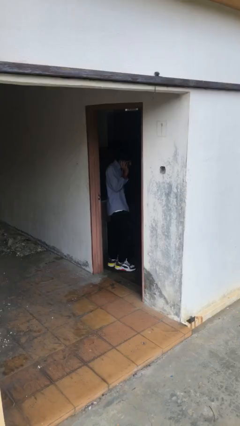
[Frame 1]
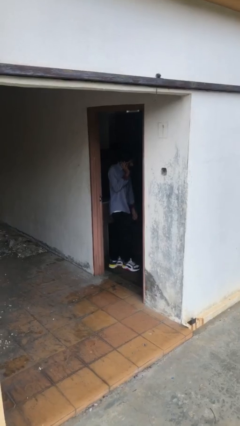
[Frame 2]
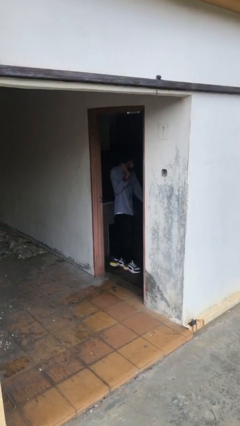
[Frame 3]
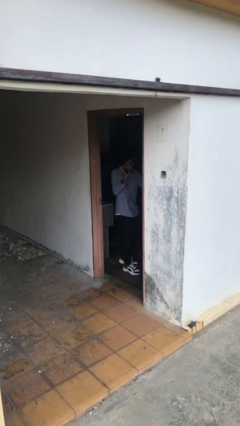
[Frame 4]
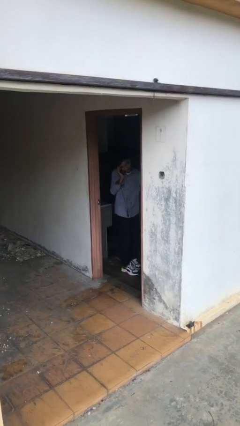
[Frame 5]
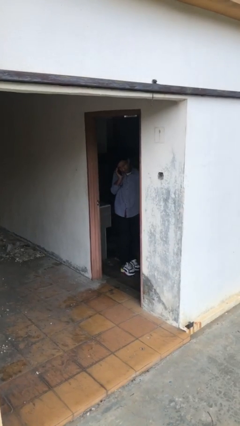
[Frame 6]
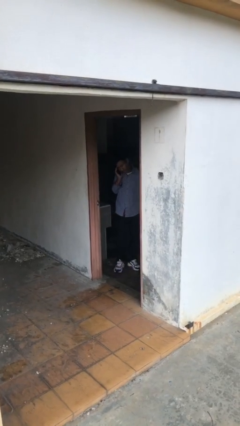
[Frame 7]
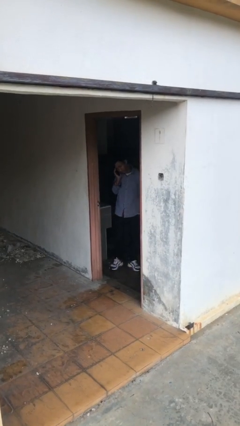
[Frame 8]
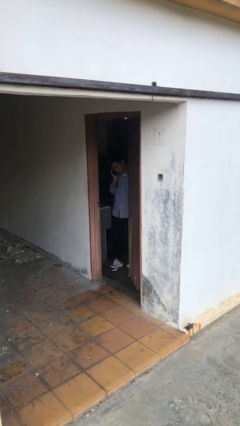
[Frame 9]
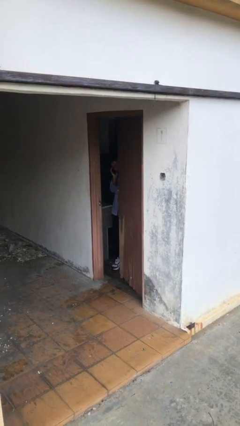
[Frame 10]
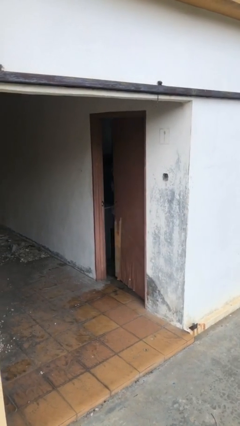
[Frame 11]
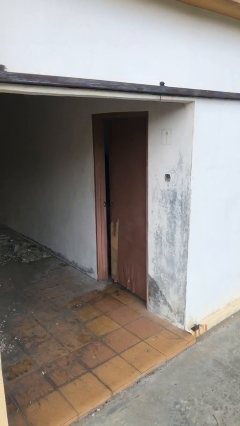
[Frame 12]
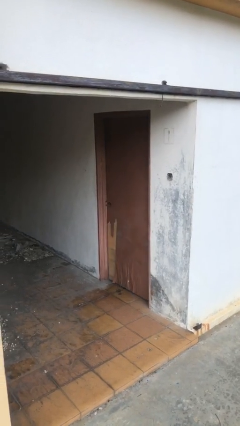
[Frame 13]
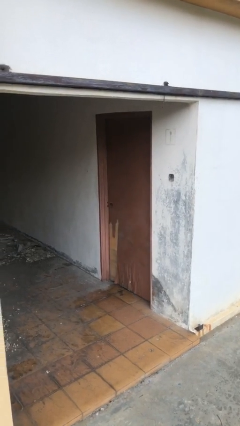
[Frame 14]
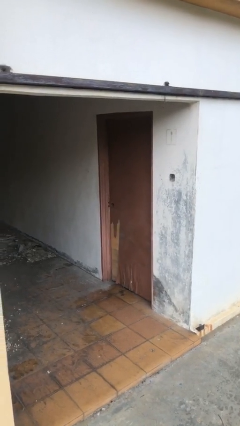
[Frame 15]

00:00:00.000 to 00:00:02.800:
person closes facility door

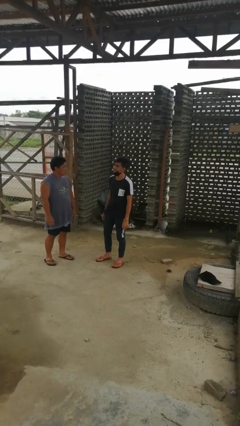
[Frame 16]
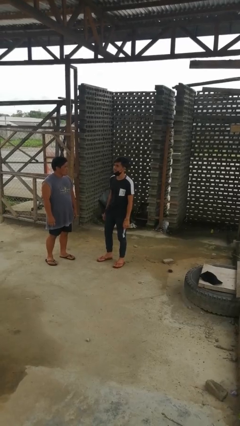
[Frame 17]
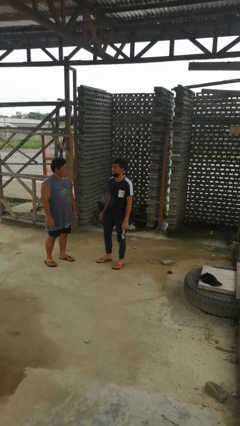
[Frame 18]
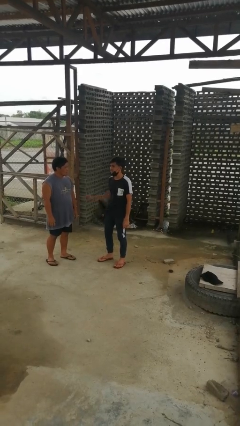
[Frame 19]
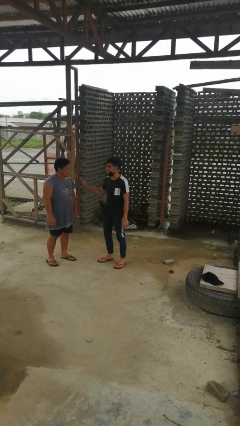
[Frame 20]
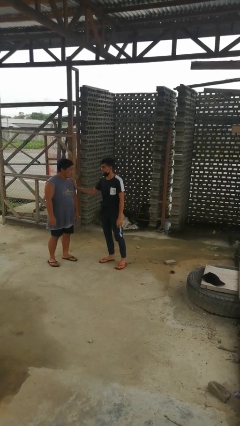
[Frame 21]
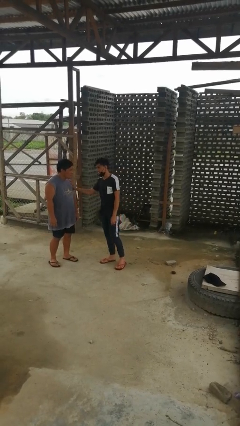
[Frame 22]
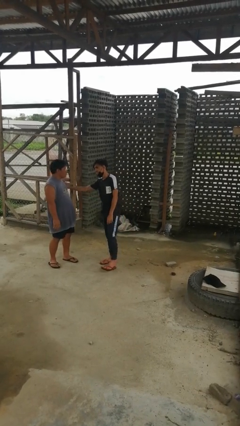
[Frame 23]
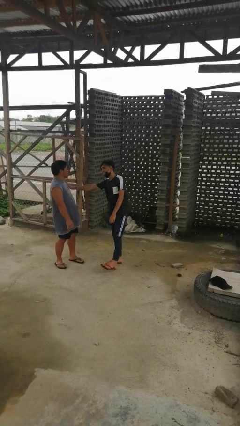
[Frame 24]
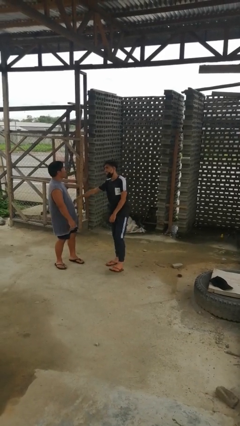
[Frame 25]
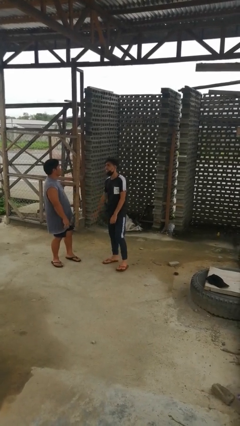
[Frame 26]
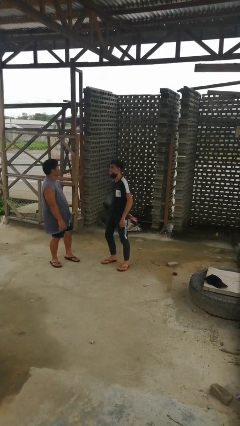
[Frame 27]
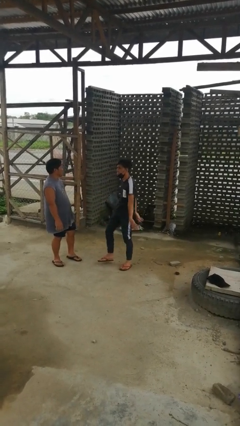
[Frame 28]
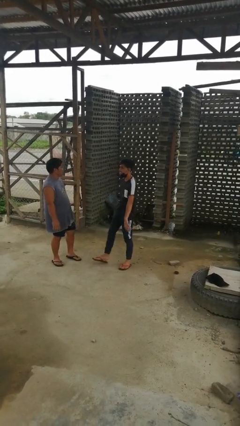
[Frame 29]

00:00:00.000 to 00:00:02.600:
person shoves person

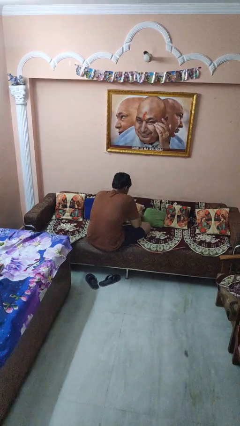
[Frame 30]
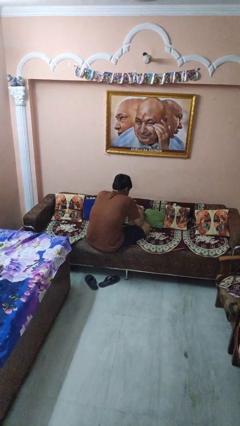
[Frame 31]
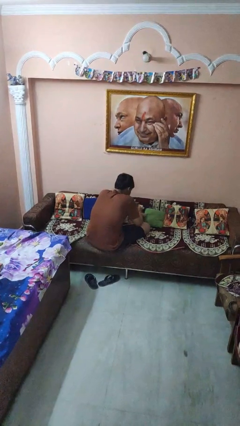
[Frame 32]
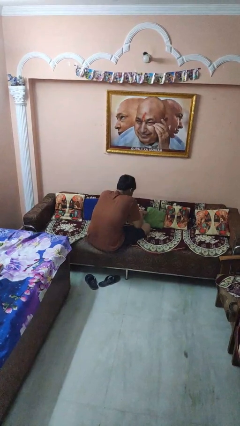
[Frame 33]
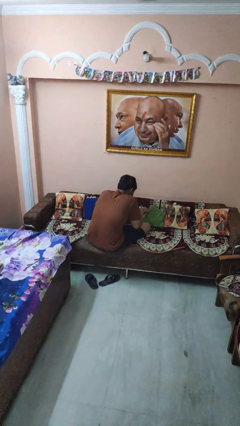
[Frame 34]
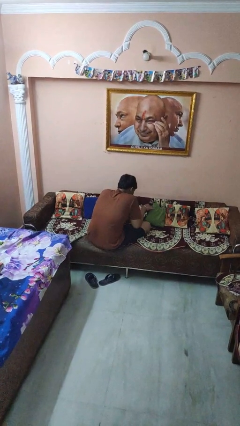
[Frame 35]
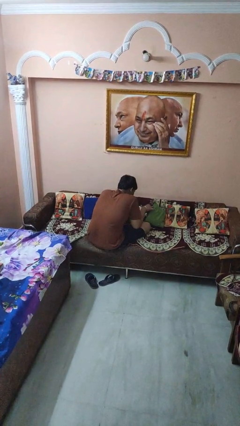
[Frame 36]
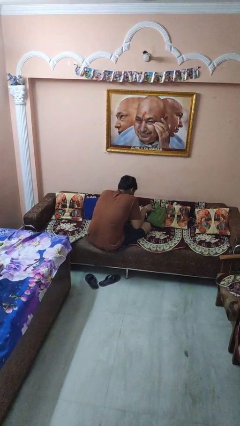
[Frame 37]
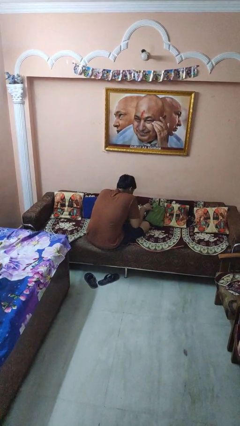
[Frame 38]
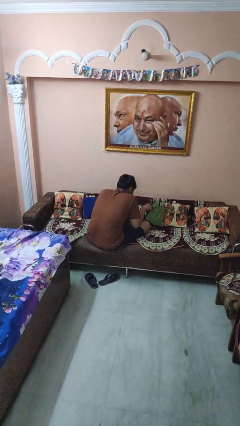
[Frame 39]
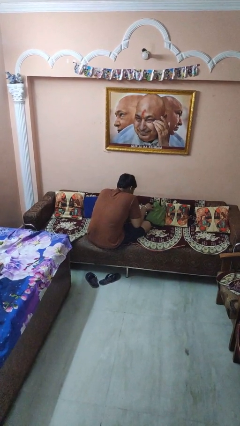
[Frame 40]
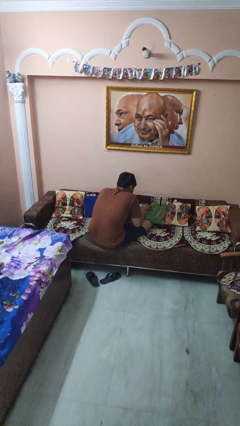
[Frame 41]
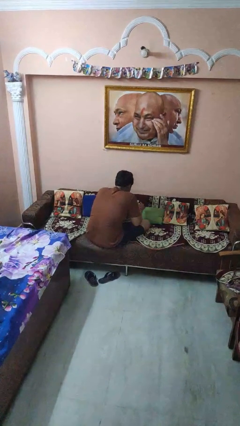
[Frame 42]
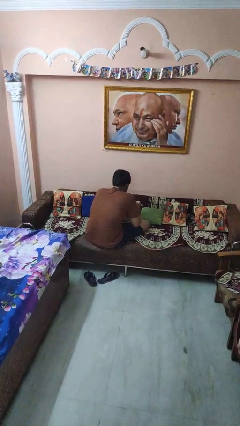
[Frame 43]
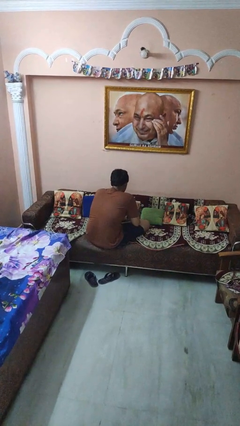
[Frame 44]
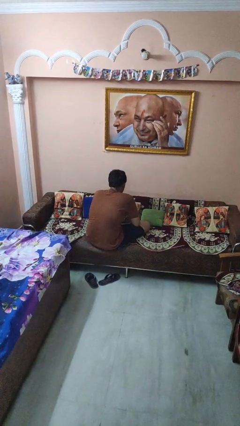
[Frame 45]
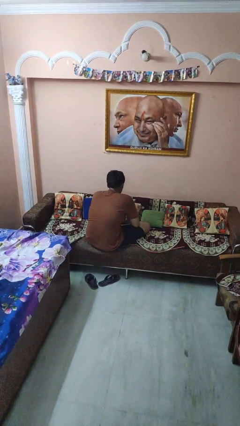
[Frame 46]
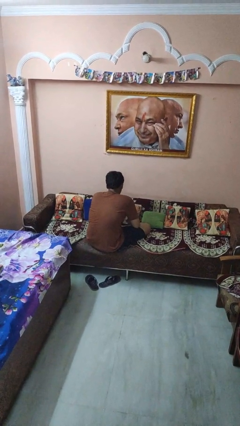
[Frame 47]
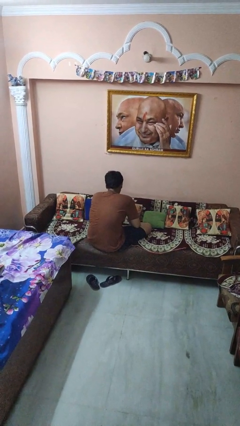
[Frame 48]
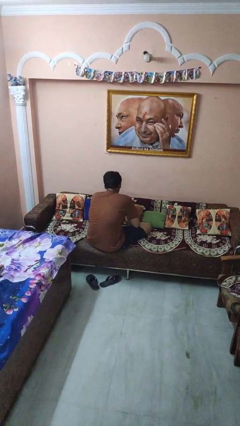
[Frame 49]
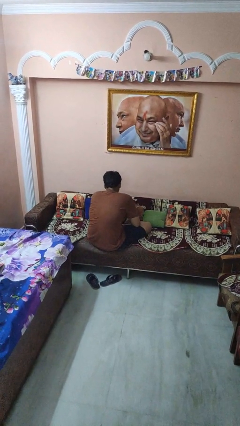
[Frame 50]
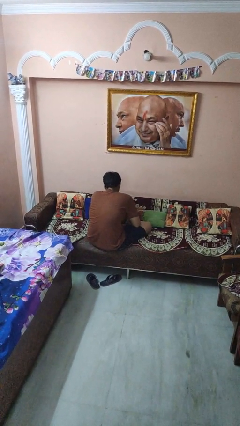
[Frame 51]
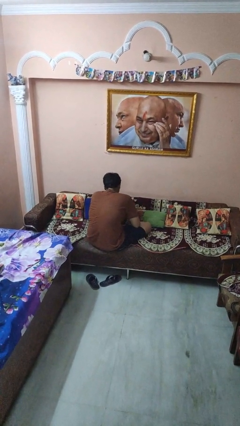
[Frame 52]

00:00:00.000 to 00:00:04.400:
person searches in couch

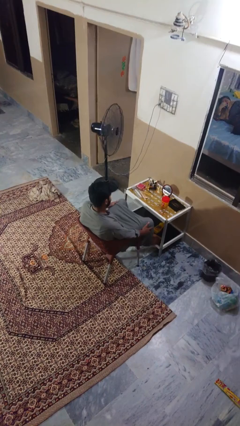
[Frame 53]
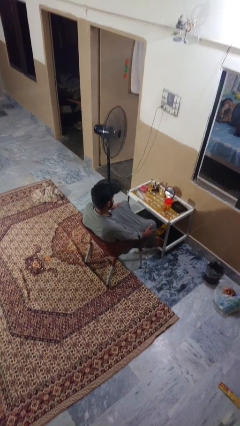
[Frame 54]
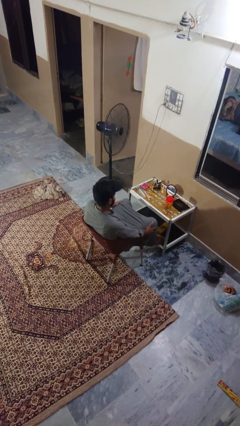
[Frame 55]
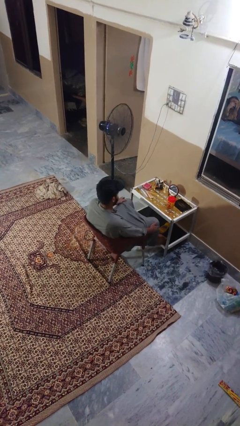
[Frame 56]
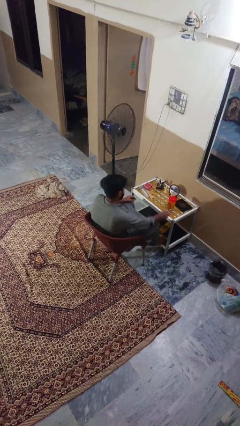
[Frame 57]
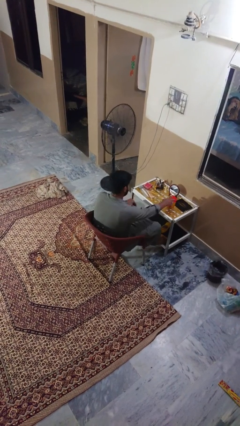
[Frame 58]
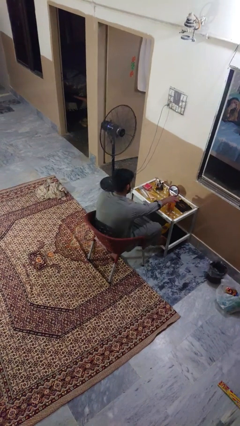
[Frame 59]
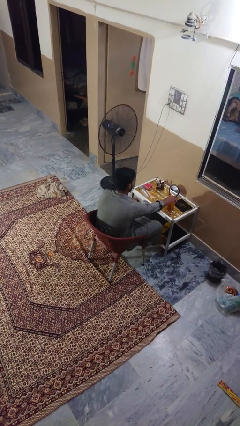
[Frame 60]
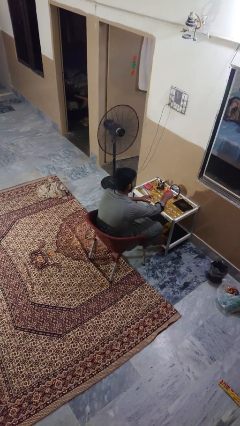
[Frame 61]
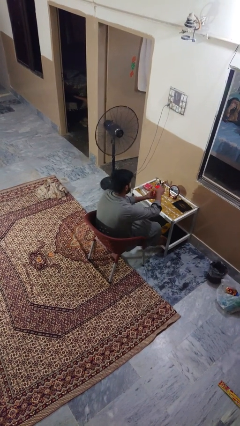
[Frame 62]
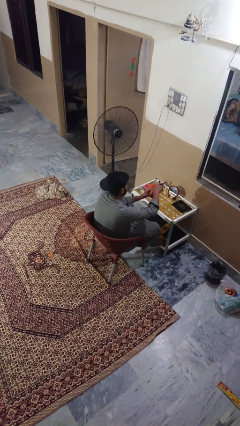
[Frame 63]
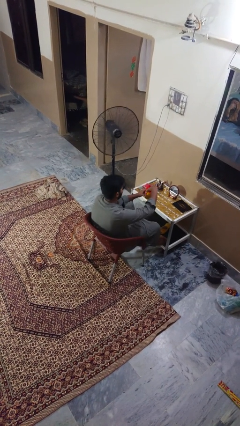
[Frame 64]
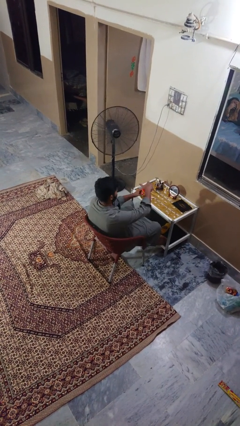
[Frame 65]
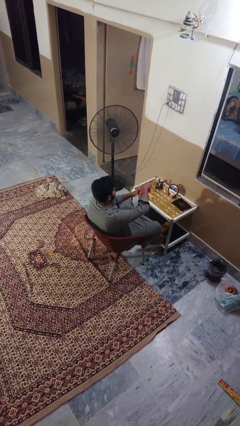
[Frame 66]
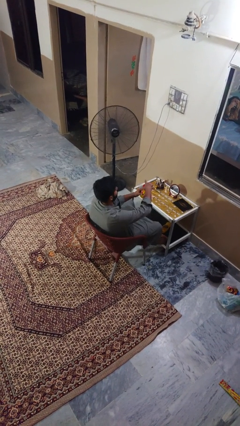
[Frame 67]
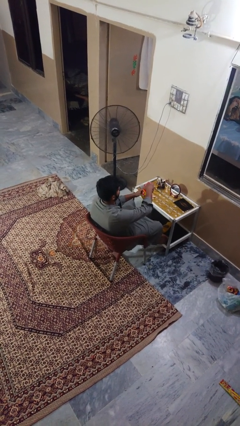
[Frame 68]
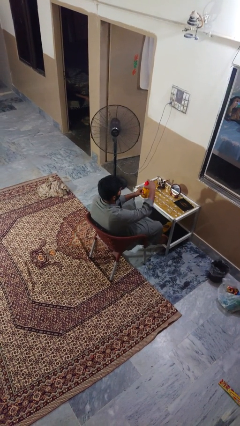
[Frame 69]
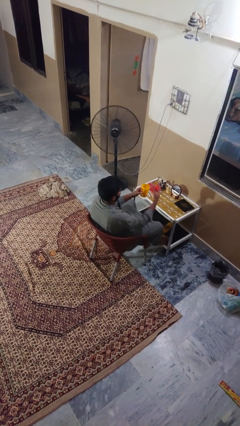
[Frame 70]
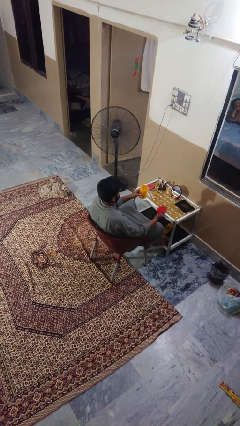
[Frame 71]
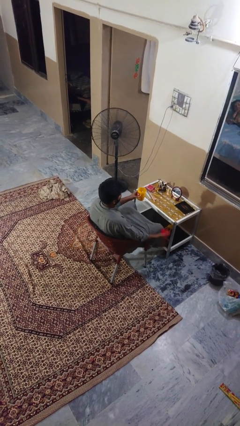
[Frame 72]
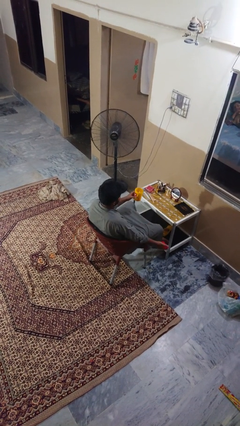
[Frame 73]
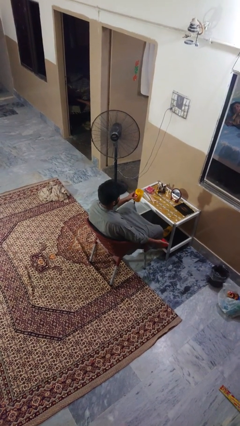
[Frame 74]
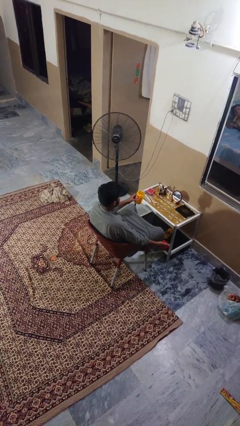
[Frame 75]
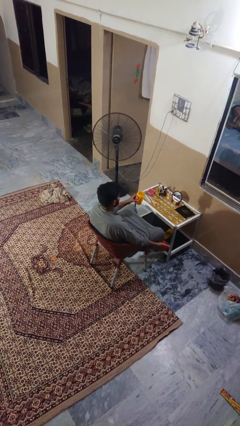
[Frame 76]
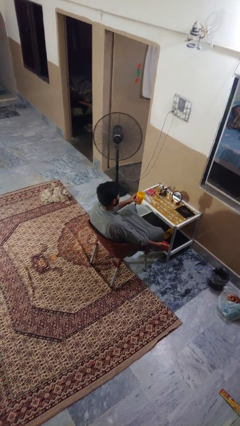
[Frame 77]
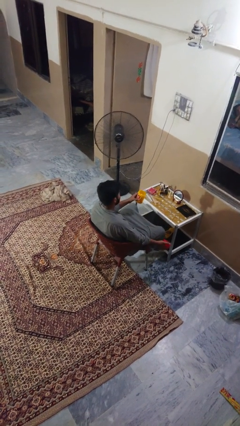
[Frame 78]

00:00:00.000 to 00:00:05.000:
person opens jar

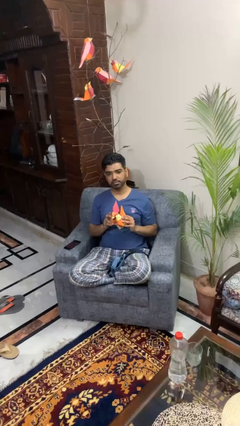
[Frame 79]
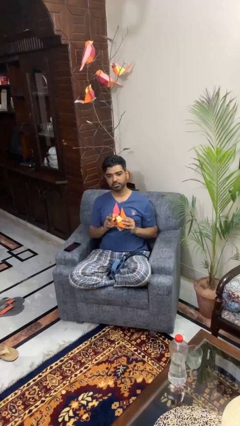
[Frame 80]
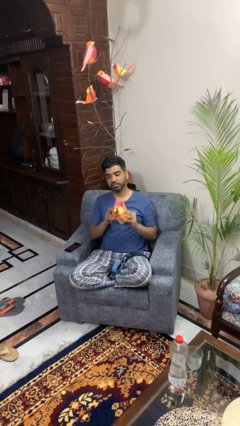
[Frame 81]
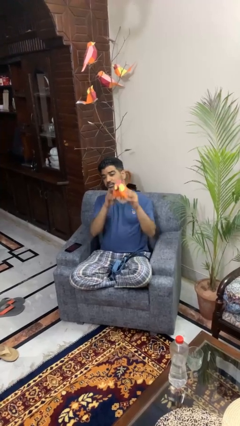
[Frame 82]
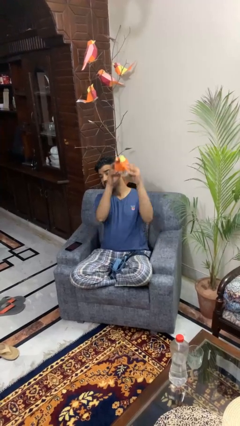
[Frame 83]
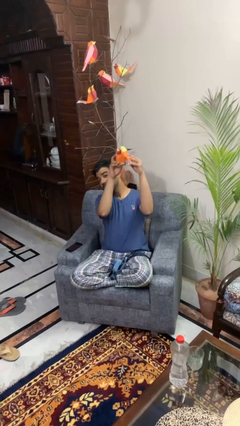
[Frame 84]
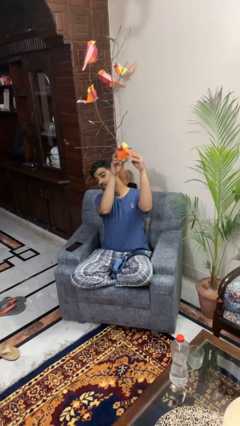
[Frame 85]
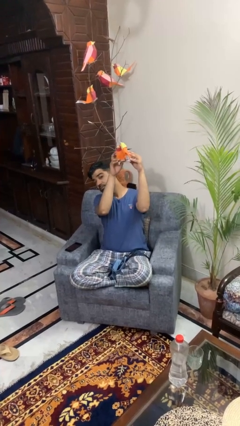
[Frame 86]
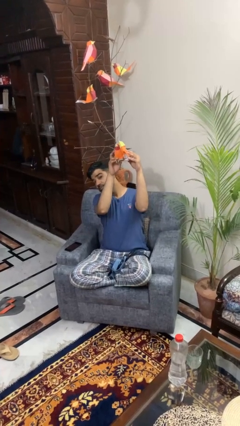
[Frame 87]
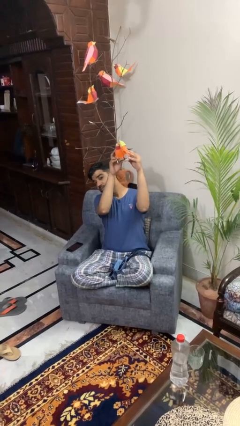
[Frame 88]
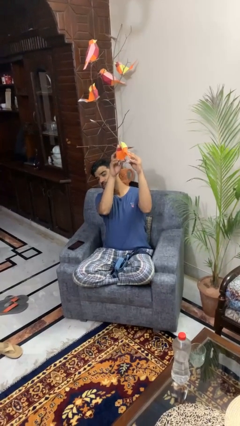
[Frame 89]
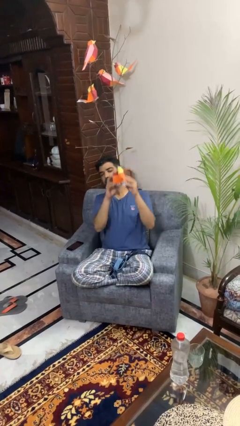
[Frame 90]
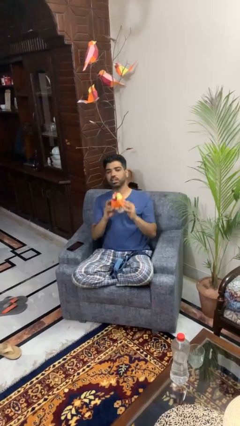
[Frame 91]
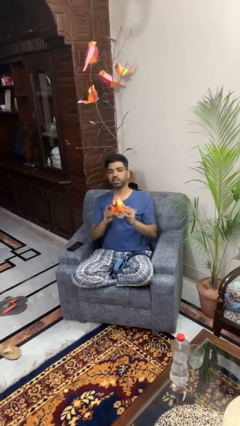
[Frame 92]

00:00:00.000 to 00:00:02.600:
person holds object above head

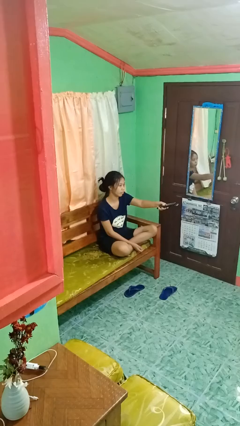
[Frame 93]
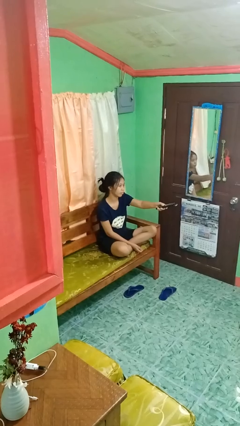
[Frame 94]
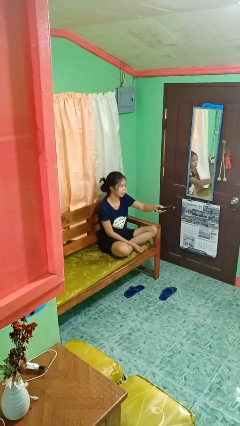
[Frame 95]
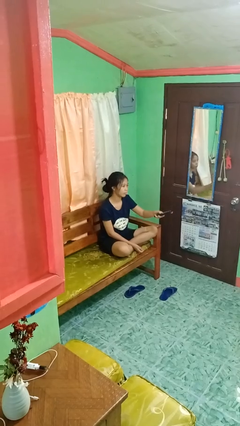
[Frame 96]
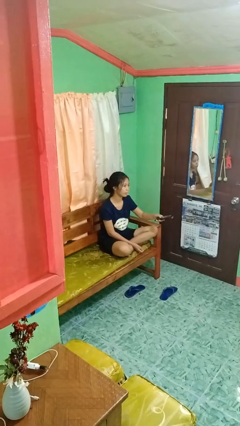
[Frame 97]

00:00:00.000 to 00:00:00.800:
person uses television remote
